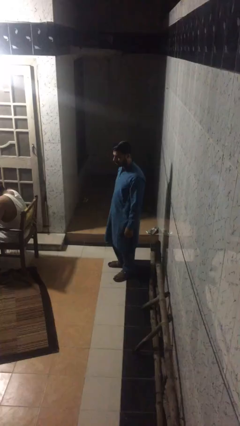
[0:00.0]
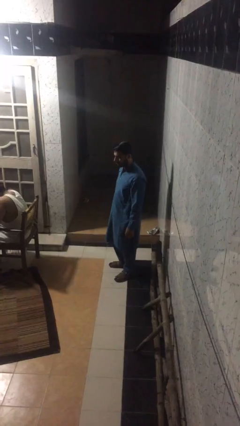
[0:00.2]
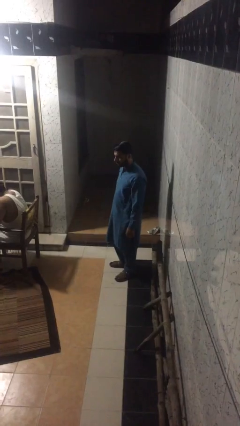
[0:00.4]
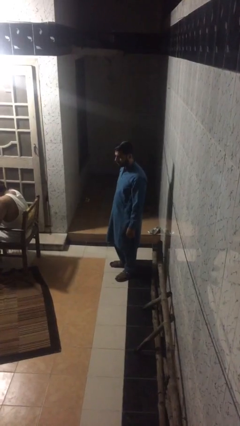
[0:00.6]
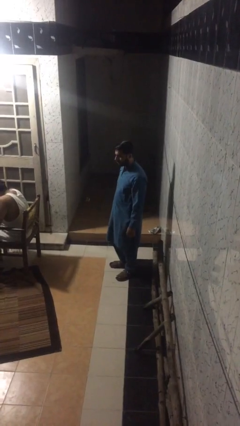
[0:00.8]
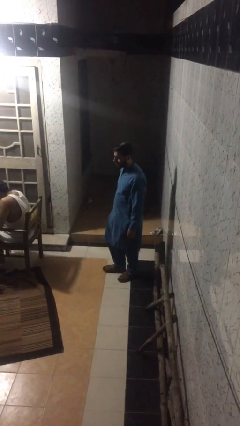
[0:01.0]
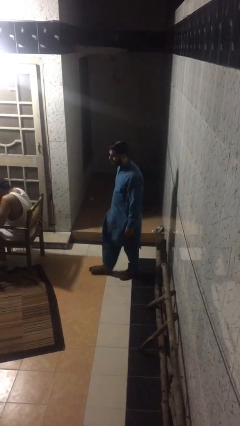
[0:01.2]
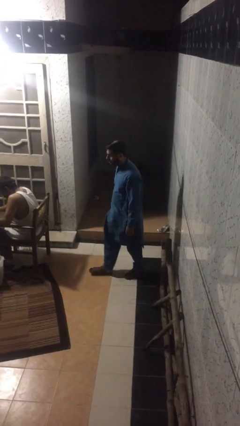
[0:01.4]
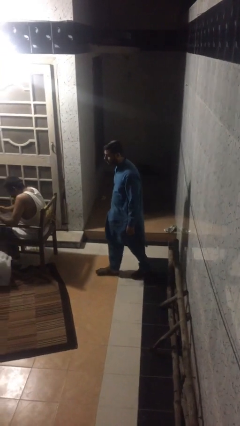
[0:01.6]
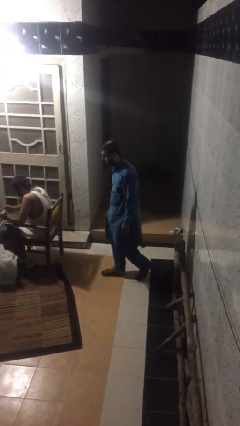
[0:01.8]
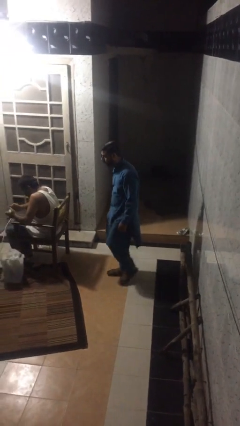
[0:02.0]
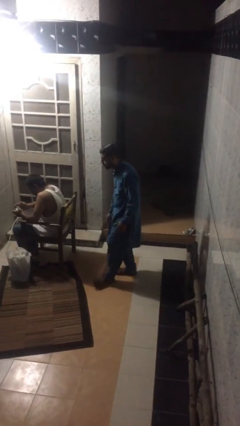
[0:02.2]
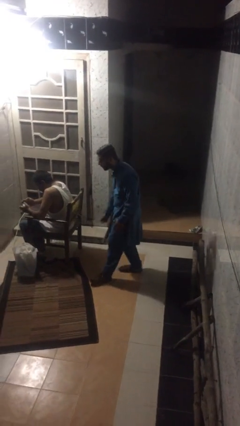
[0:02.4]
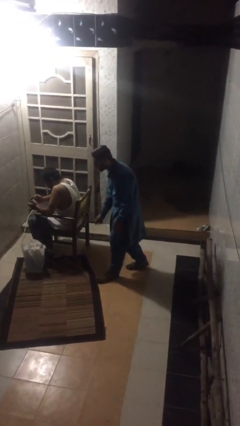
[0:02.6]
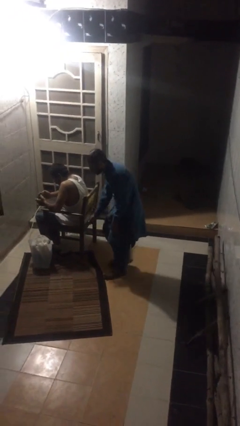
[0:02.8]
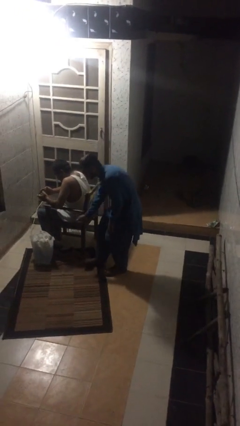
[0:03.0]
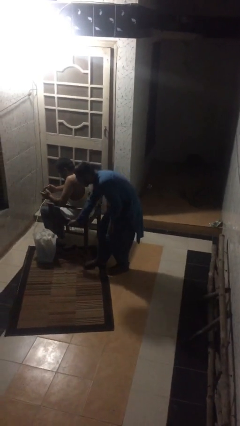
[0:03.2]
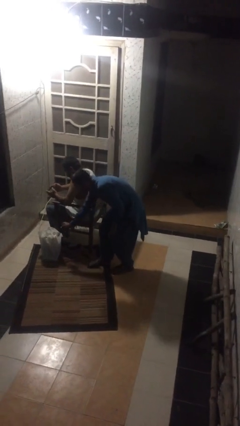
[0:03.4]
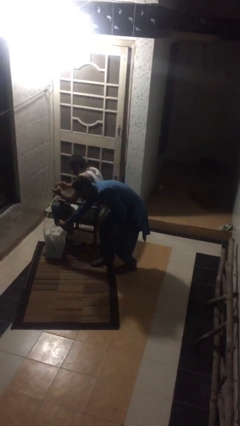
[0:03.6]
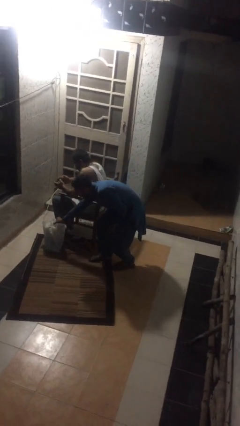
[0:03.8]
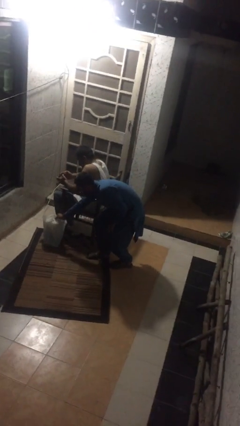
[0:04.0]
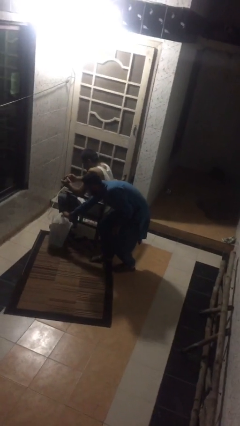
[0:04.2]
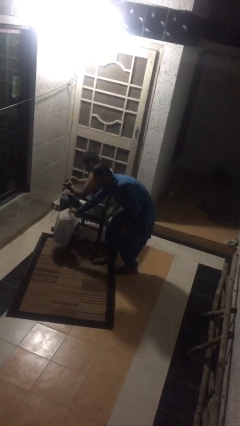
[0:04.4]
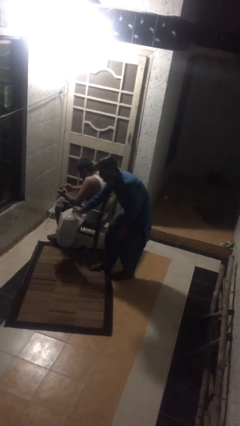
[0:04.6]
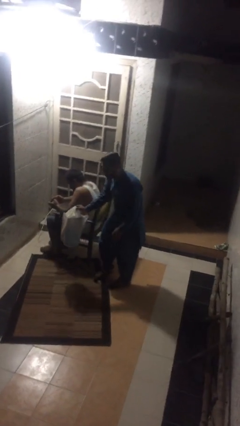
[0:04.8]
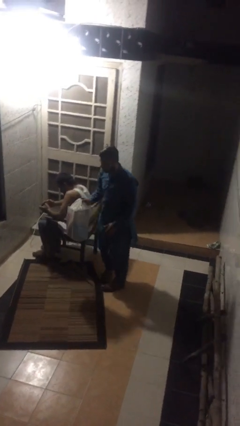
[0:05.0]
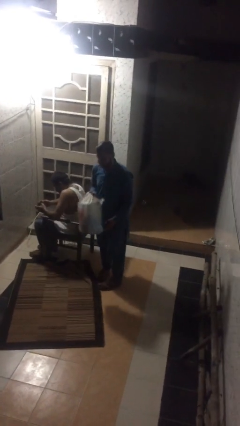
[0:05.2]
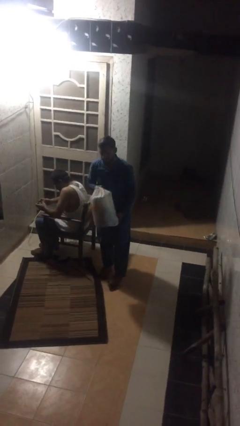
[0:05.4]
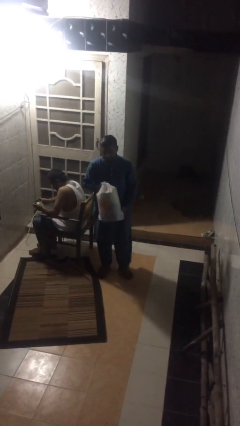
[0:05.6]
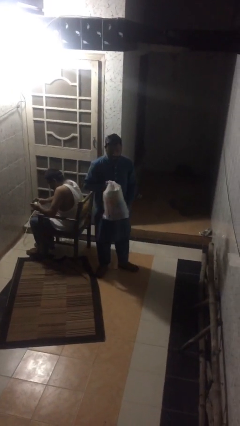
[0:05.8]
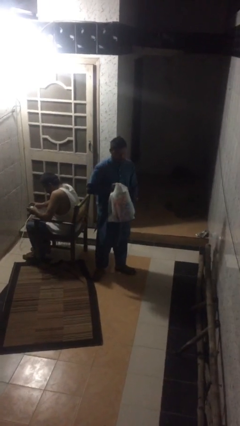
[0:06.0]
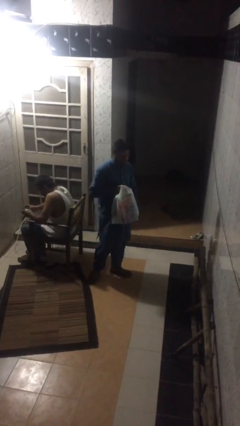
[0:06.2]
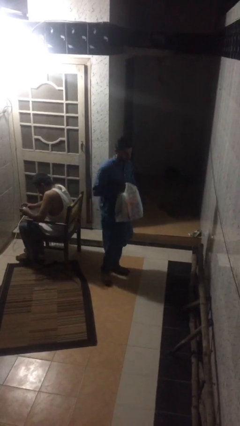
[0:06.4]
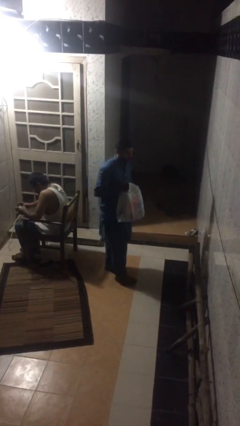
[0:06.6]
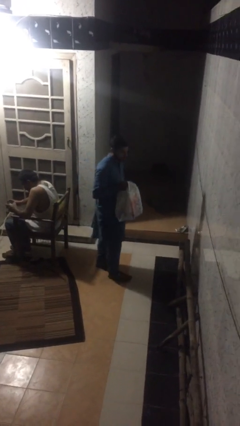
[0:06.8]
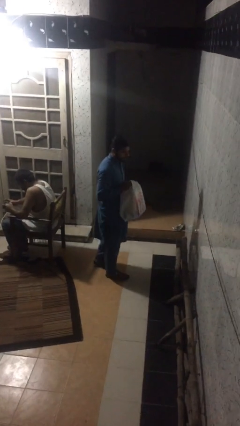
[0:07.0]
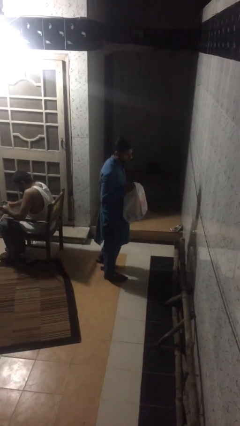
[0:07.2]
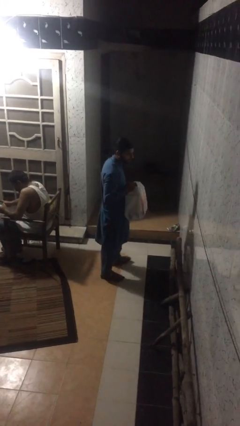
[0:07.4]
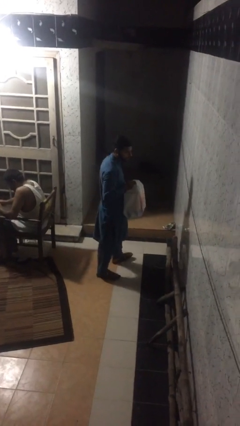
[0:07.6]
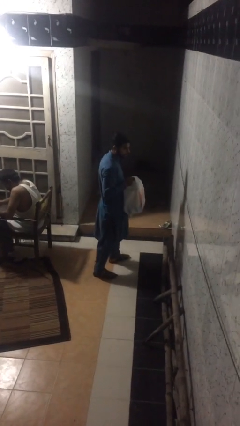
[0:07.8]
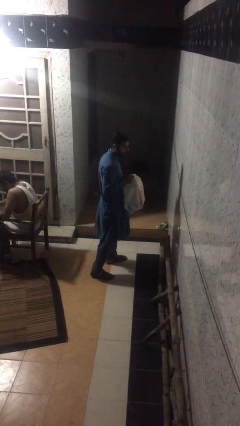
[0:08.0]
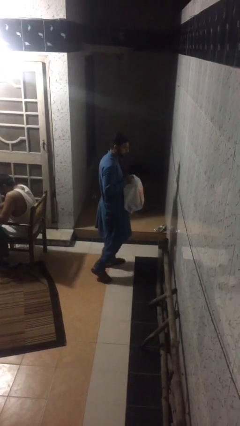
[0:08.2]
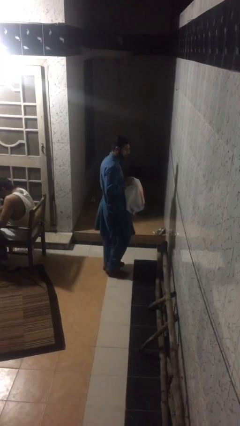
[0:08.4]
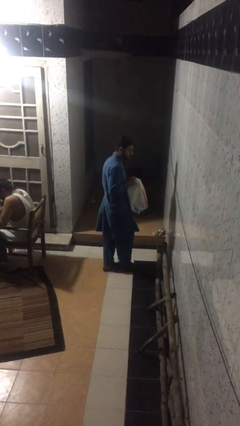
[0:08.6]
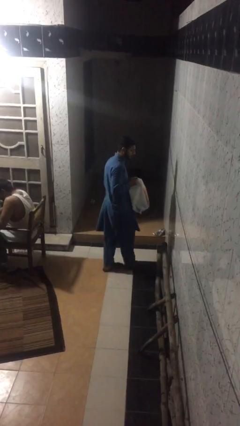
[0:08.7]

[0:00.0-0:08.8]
person steals object from person

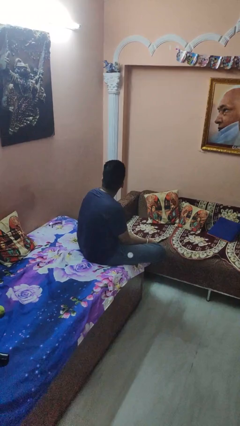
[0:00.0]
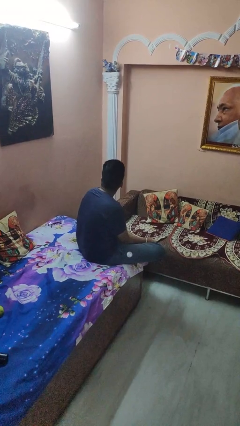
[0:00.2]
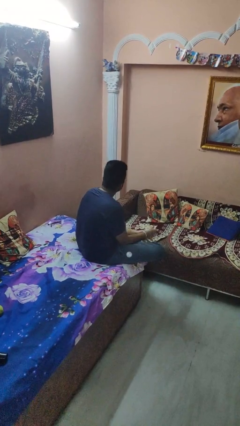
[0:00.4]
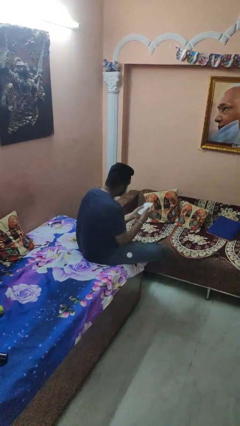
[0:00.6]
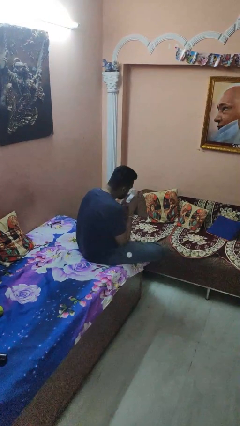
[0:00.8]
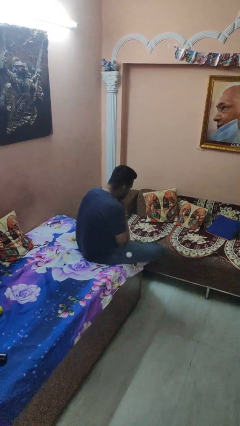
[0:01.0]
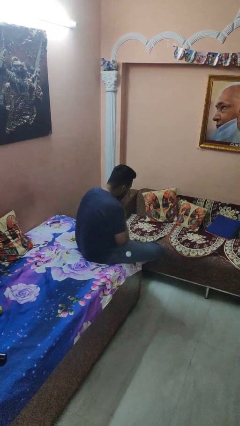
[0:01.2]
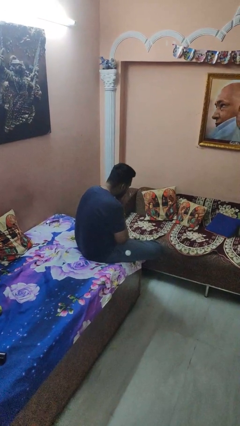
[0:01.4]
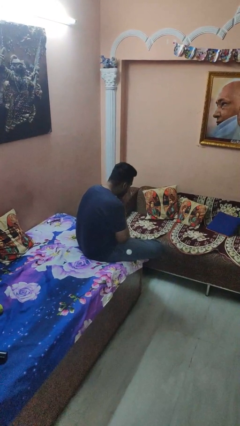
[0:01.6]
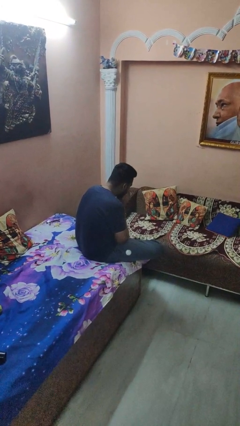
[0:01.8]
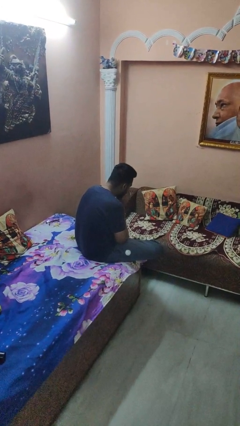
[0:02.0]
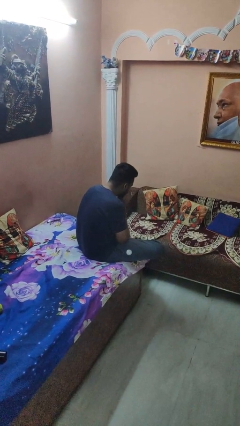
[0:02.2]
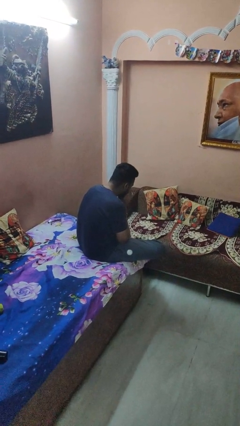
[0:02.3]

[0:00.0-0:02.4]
person blows nose

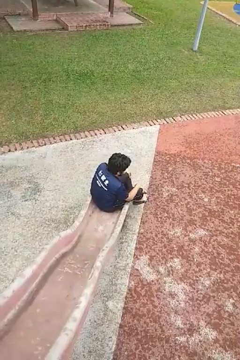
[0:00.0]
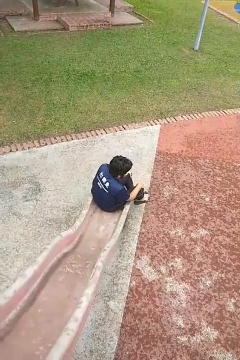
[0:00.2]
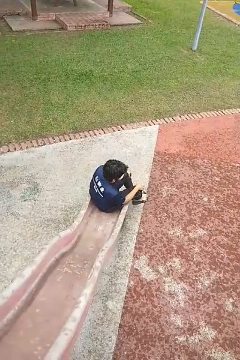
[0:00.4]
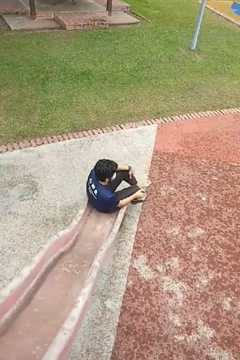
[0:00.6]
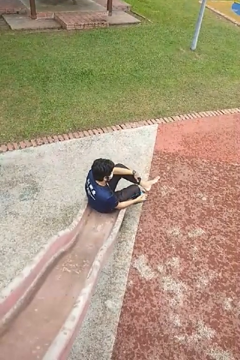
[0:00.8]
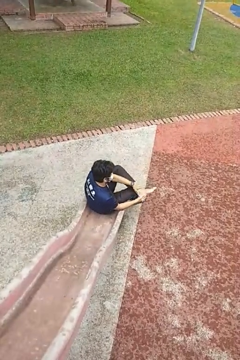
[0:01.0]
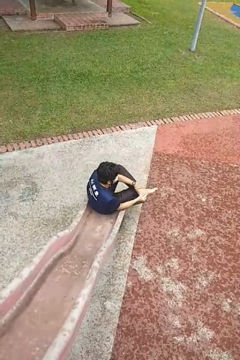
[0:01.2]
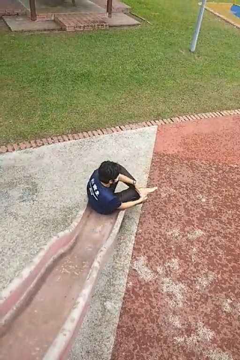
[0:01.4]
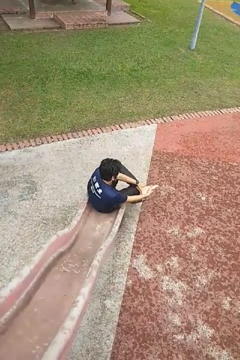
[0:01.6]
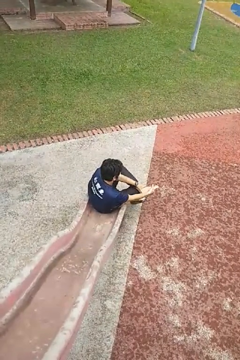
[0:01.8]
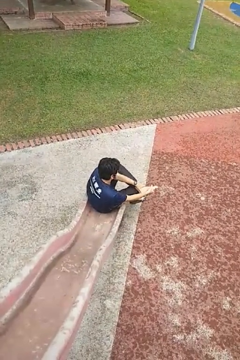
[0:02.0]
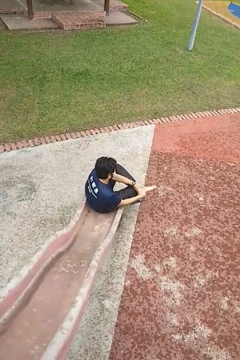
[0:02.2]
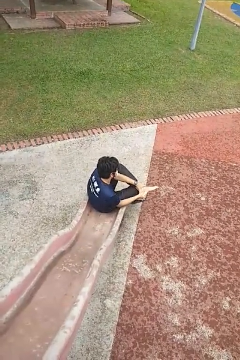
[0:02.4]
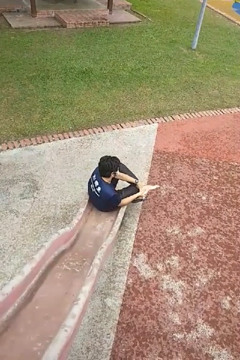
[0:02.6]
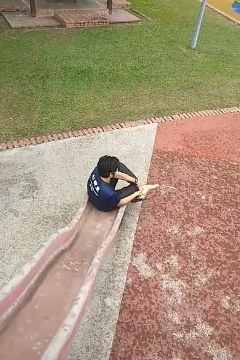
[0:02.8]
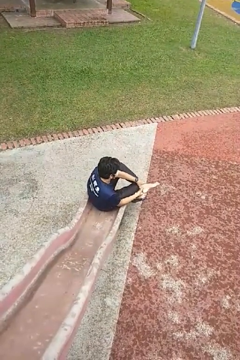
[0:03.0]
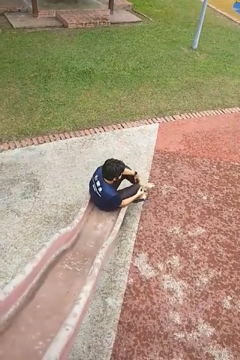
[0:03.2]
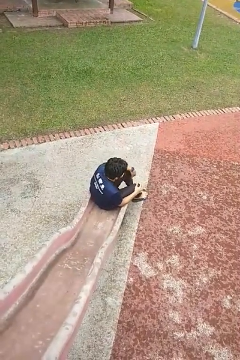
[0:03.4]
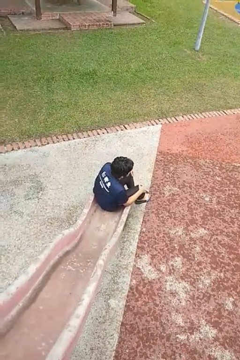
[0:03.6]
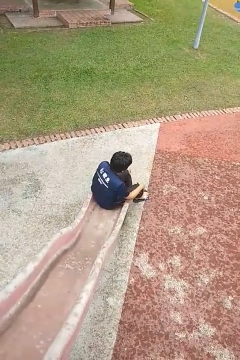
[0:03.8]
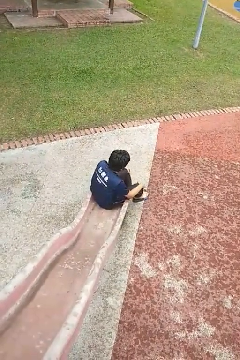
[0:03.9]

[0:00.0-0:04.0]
person rubs foot

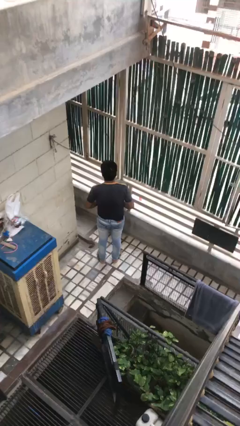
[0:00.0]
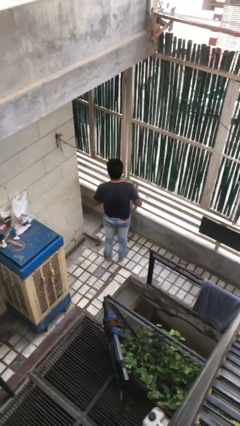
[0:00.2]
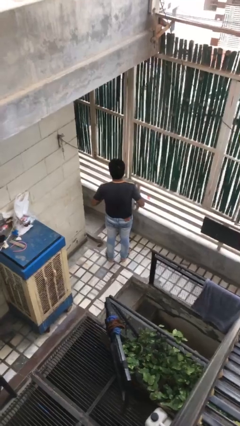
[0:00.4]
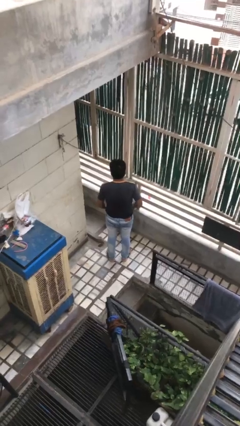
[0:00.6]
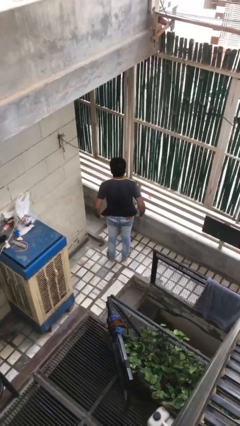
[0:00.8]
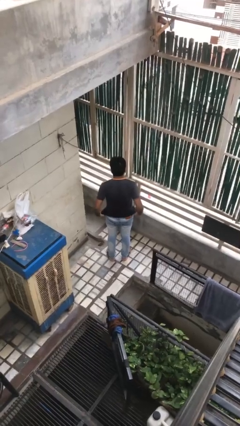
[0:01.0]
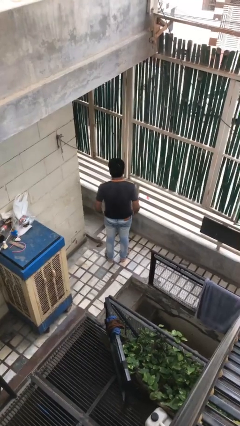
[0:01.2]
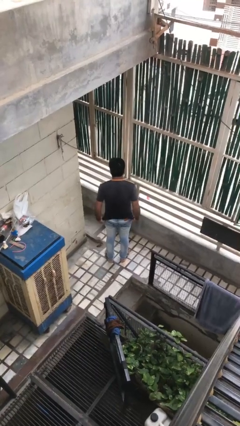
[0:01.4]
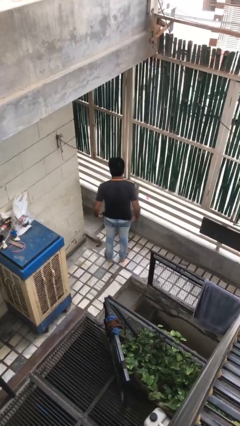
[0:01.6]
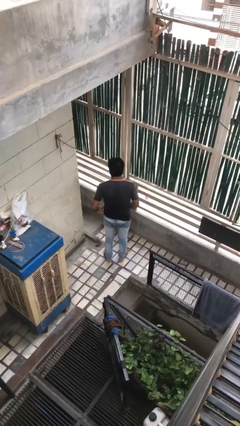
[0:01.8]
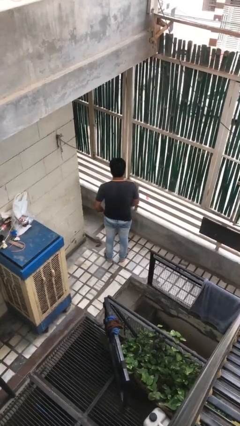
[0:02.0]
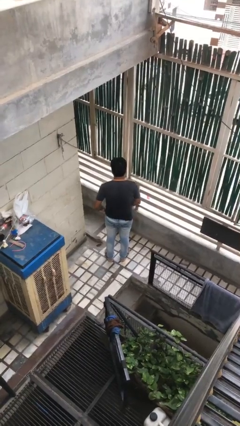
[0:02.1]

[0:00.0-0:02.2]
person untucks shirt

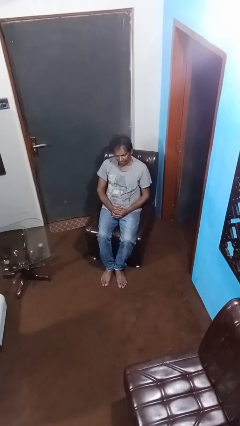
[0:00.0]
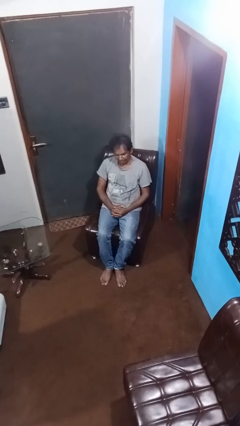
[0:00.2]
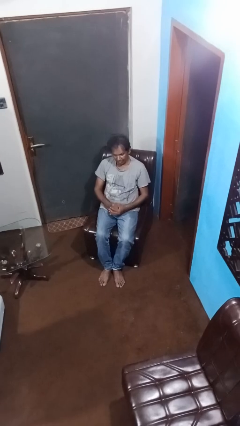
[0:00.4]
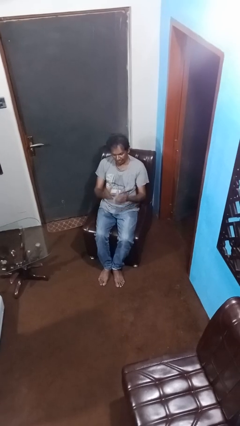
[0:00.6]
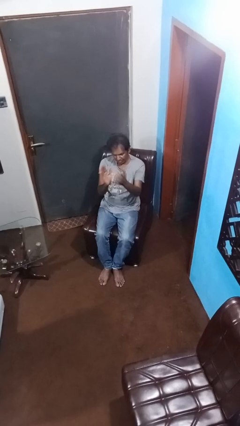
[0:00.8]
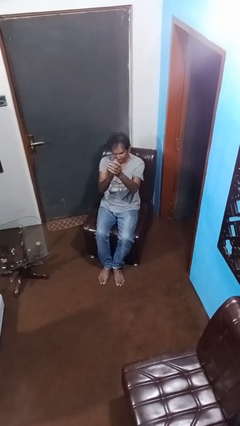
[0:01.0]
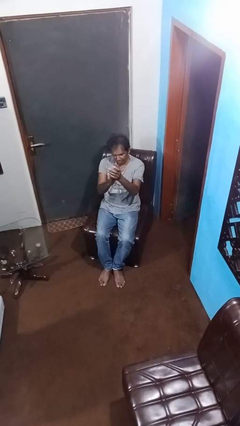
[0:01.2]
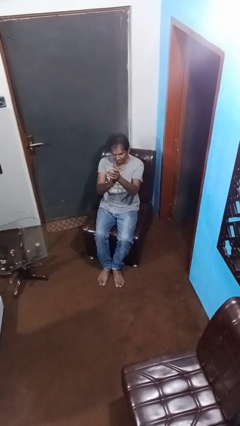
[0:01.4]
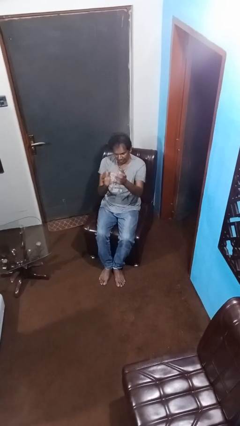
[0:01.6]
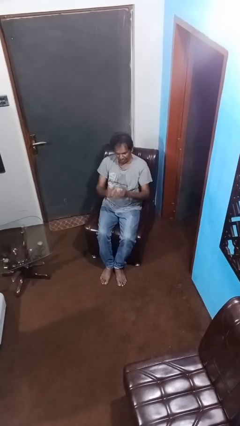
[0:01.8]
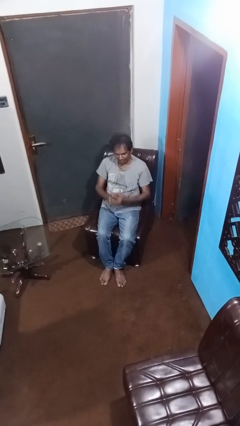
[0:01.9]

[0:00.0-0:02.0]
person claps hands
